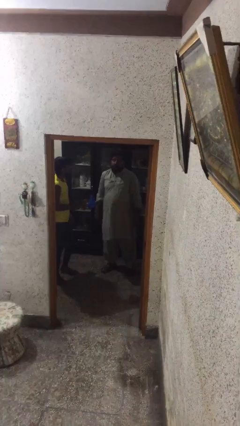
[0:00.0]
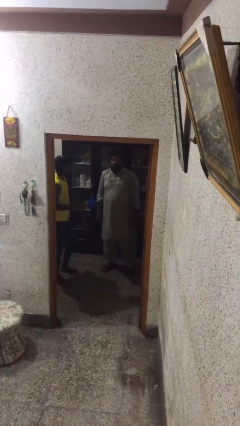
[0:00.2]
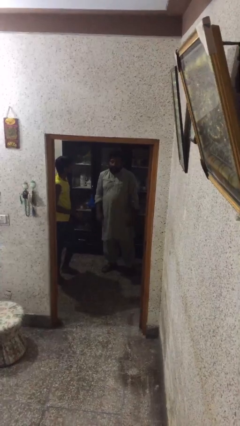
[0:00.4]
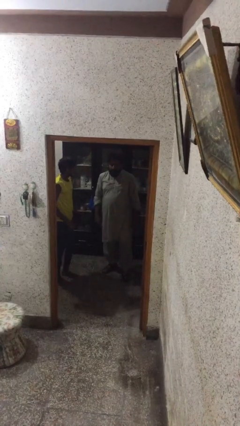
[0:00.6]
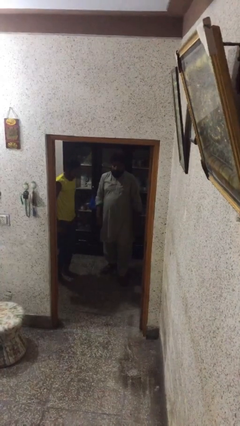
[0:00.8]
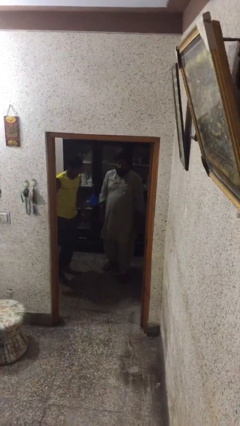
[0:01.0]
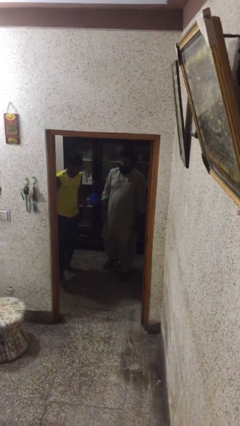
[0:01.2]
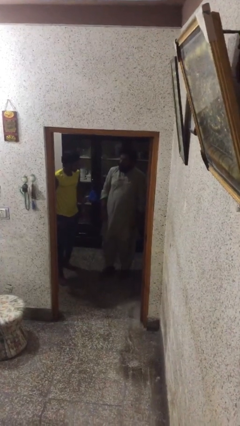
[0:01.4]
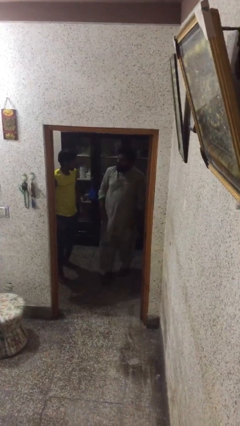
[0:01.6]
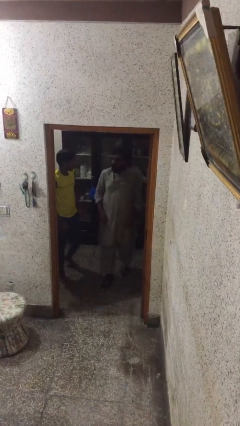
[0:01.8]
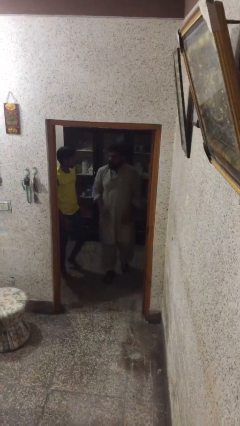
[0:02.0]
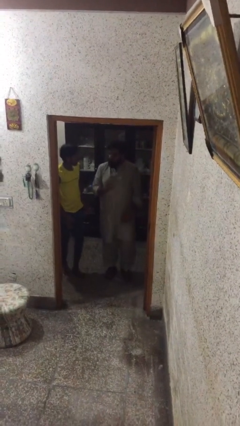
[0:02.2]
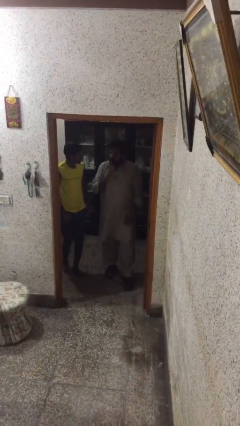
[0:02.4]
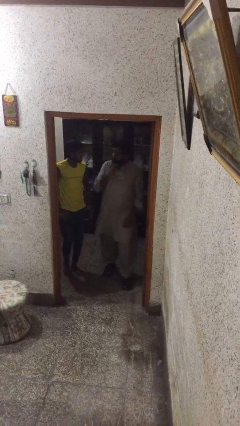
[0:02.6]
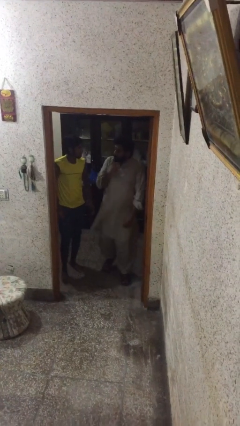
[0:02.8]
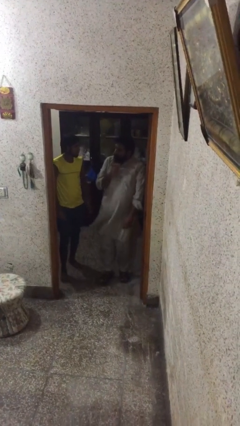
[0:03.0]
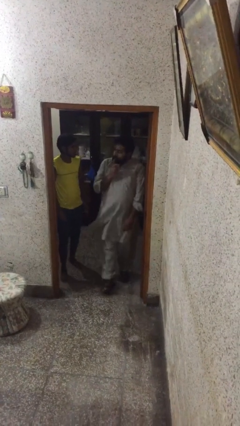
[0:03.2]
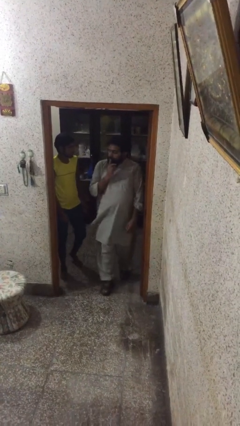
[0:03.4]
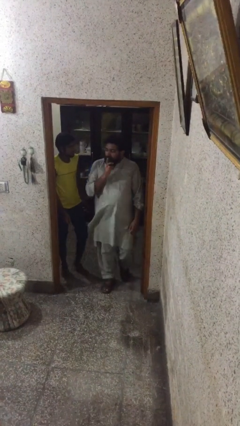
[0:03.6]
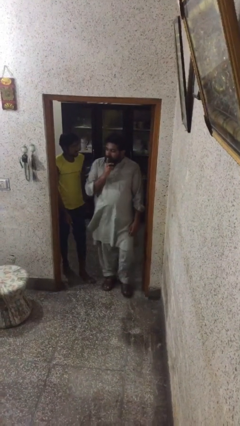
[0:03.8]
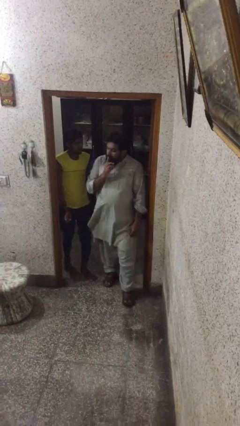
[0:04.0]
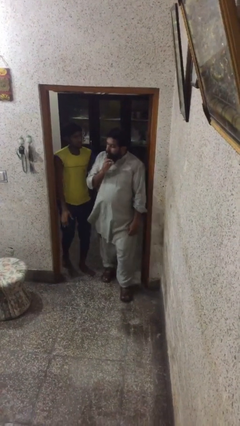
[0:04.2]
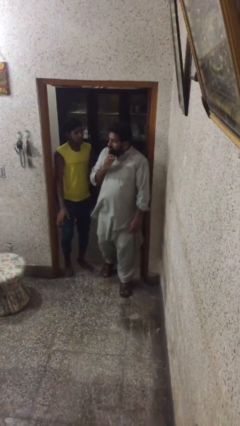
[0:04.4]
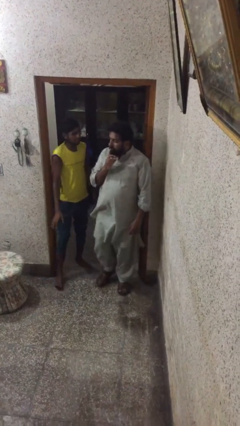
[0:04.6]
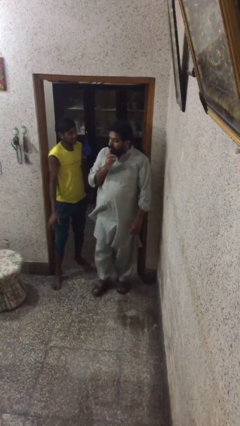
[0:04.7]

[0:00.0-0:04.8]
person talks to person

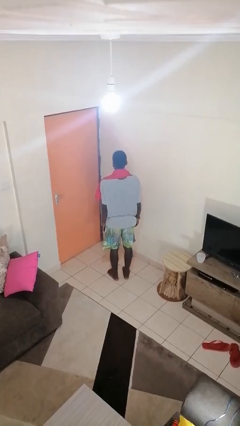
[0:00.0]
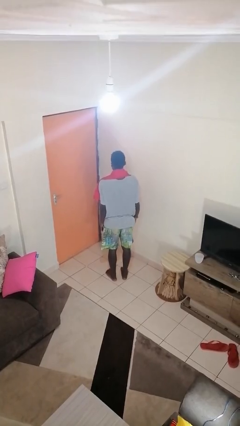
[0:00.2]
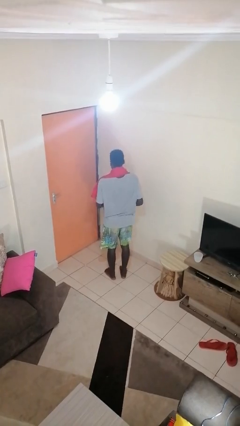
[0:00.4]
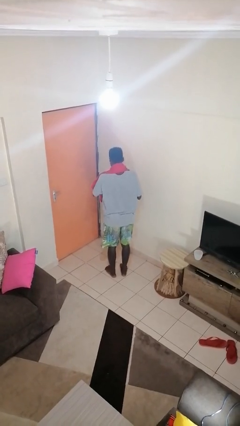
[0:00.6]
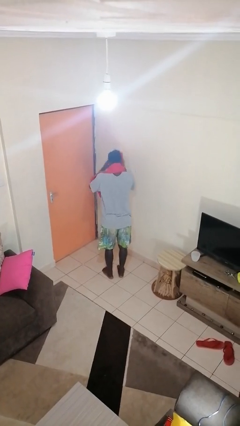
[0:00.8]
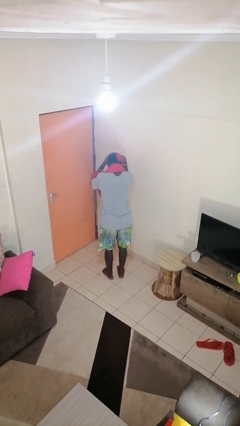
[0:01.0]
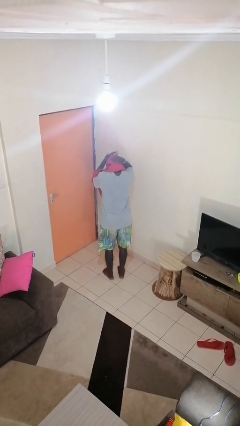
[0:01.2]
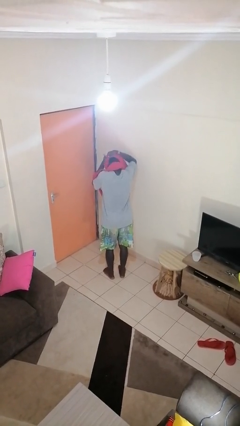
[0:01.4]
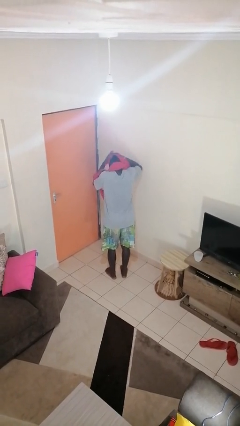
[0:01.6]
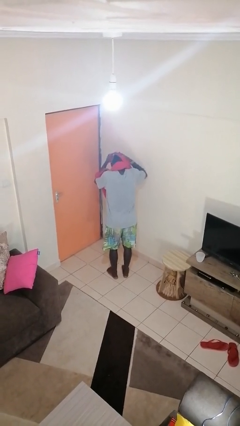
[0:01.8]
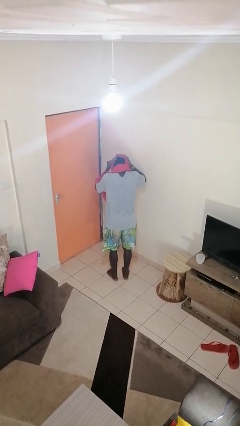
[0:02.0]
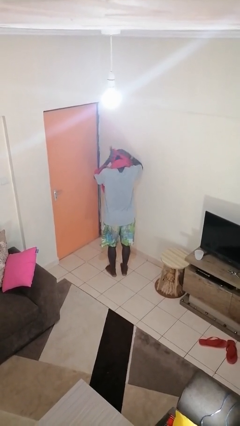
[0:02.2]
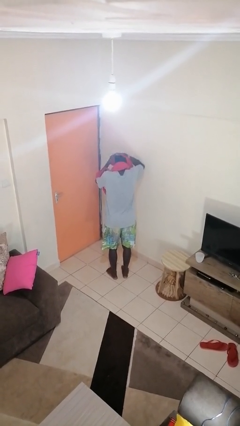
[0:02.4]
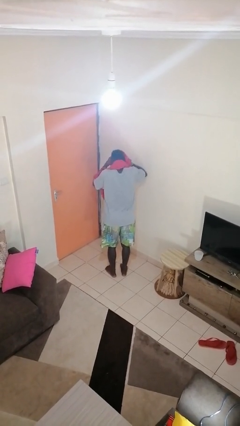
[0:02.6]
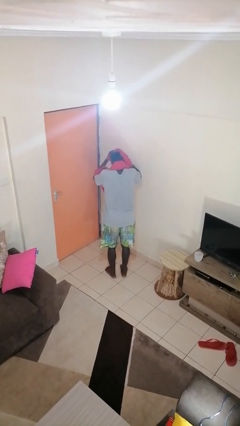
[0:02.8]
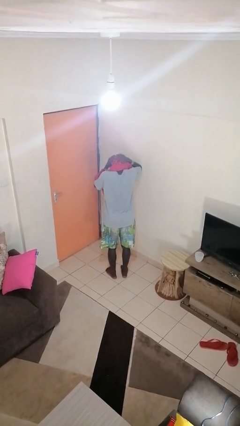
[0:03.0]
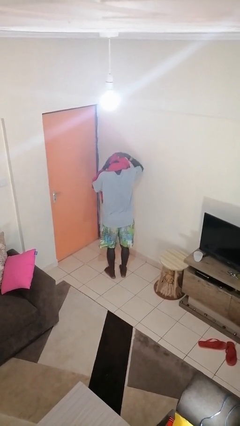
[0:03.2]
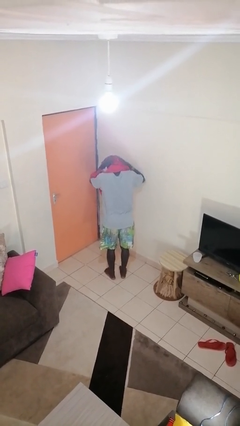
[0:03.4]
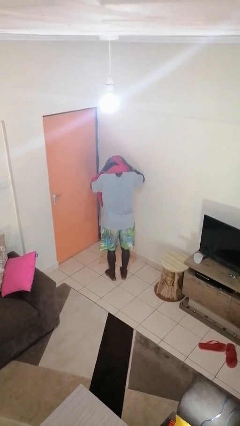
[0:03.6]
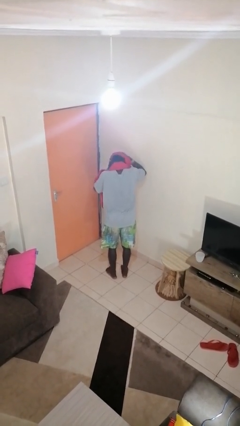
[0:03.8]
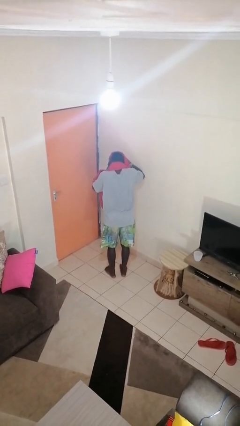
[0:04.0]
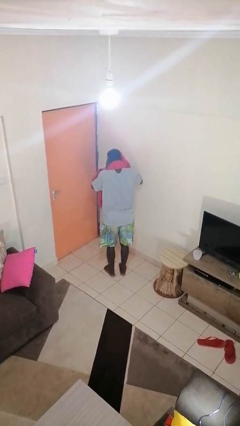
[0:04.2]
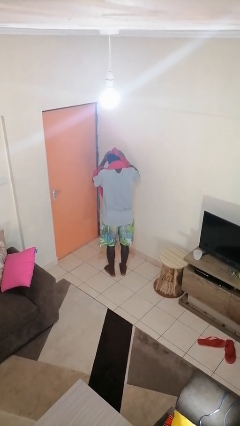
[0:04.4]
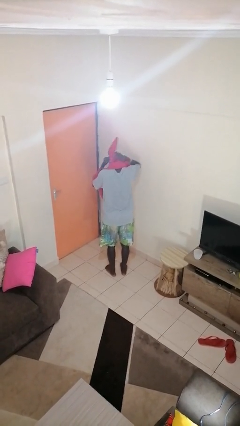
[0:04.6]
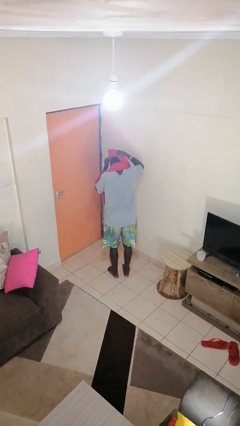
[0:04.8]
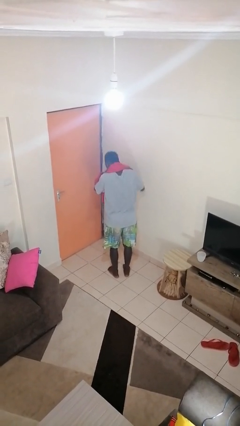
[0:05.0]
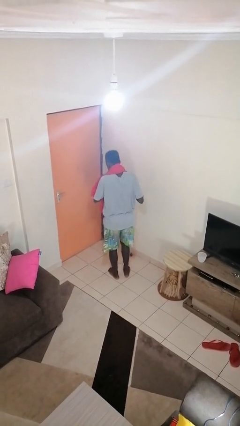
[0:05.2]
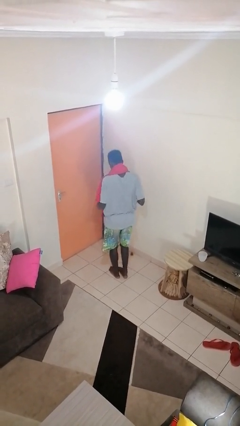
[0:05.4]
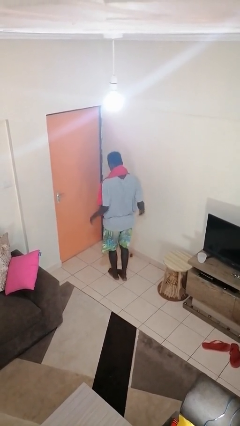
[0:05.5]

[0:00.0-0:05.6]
person dries hair with towel

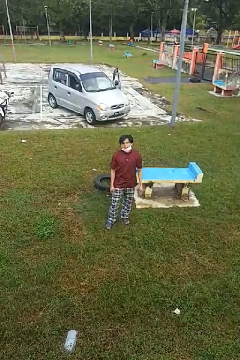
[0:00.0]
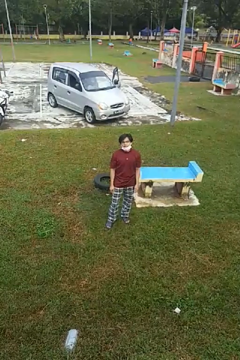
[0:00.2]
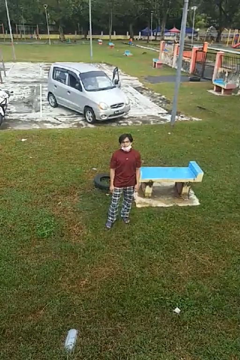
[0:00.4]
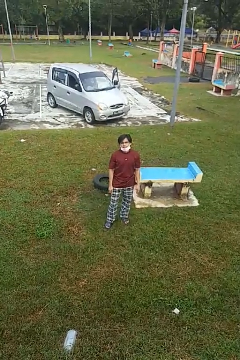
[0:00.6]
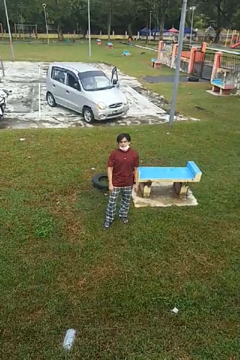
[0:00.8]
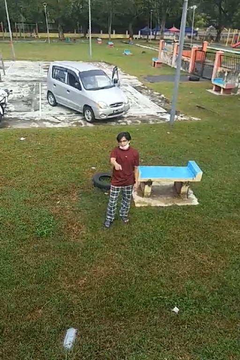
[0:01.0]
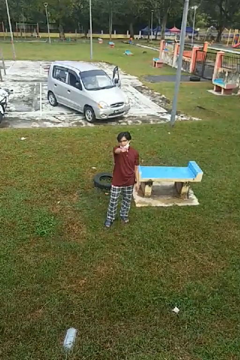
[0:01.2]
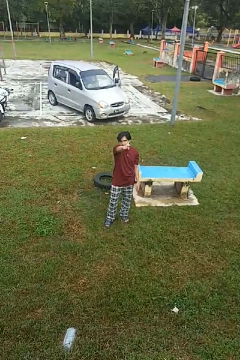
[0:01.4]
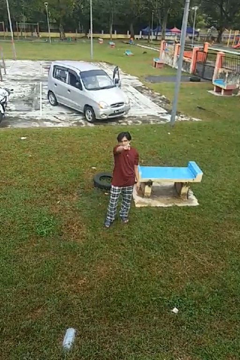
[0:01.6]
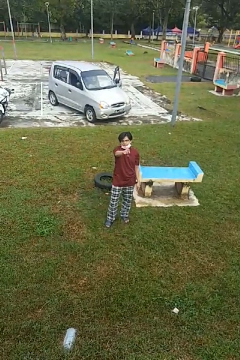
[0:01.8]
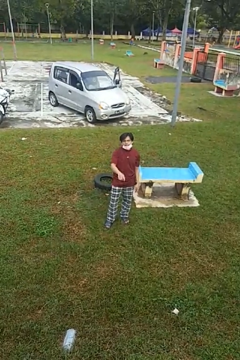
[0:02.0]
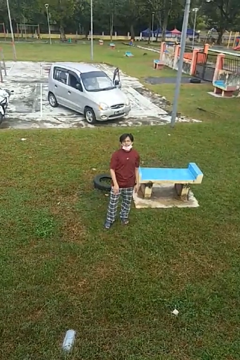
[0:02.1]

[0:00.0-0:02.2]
person points at person

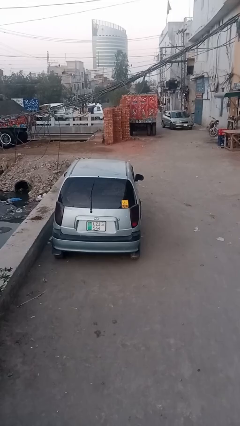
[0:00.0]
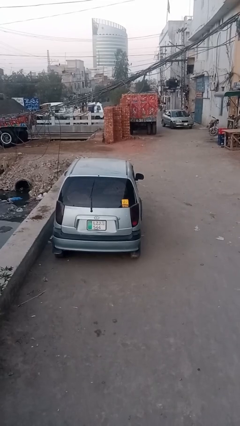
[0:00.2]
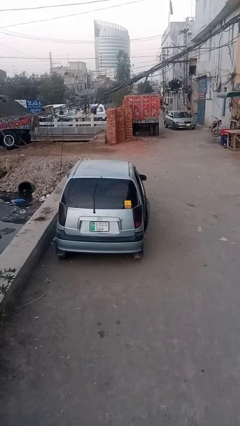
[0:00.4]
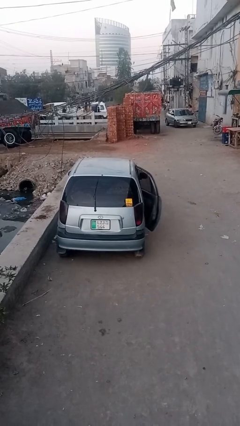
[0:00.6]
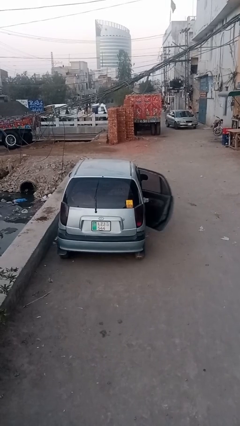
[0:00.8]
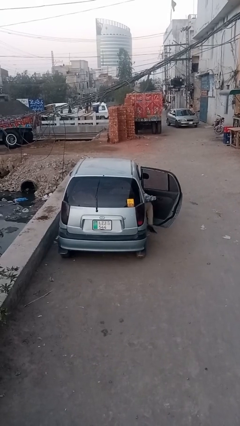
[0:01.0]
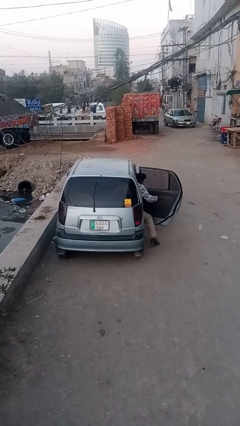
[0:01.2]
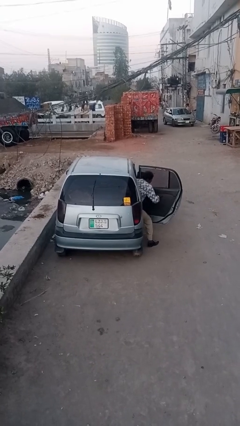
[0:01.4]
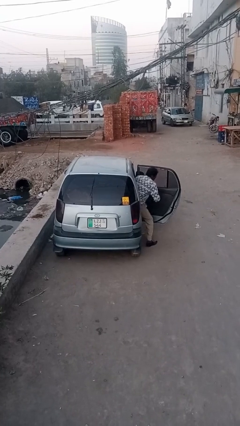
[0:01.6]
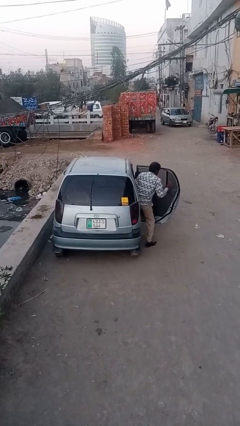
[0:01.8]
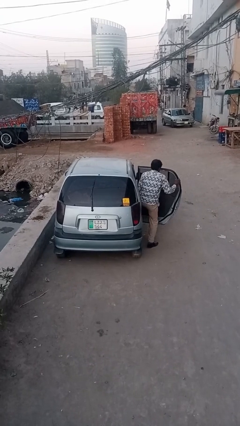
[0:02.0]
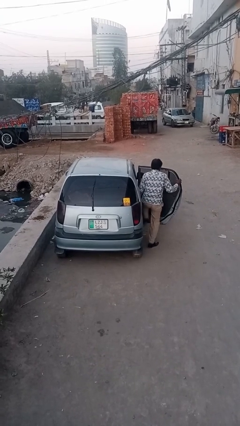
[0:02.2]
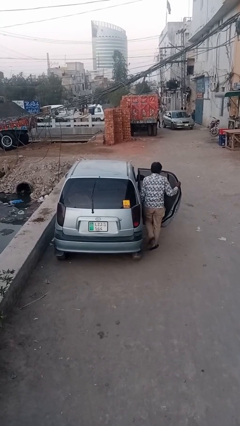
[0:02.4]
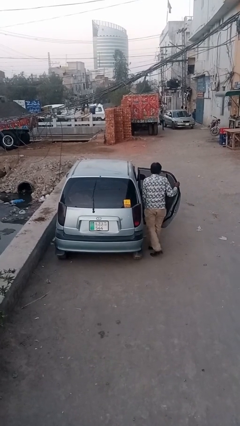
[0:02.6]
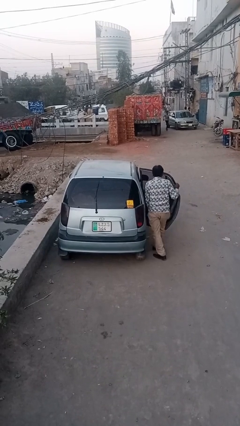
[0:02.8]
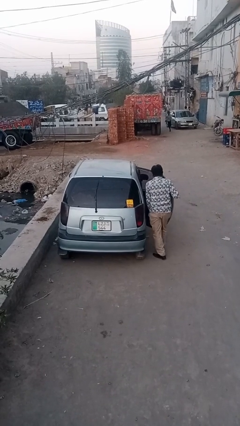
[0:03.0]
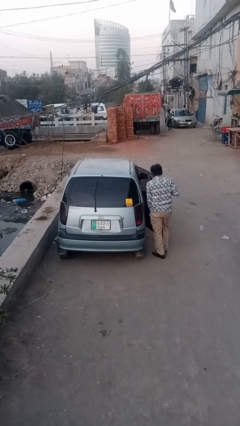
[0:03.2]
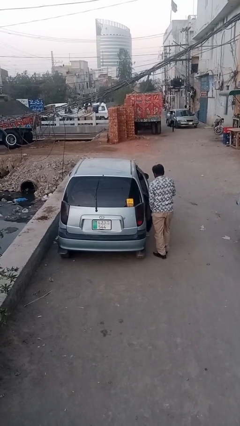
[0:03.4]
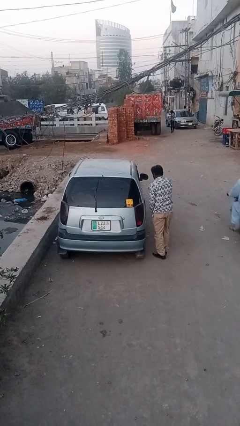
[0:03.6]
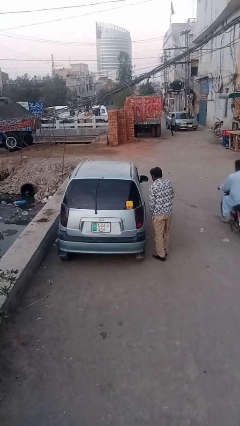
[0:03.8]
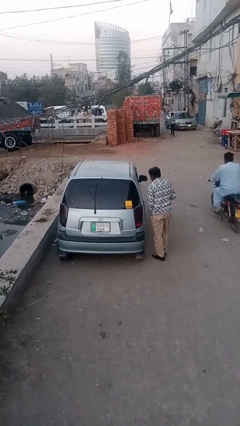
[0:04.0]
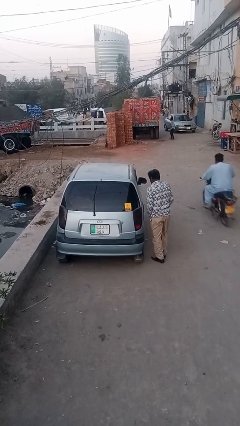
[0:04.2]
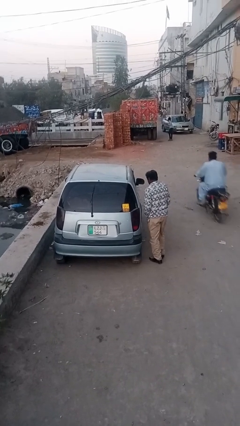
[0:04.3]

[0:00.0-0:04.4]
car drops off person

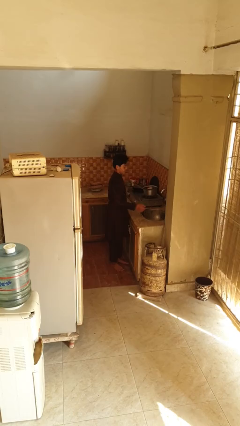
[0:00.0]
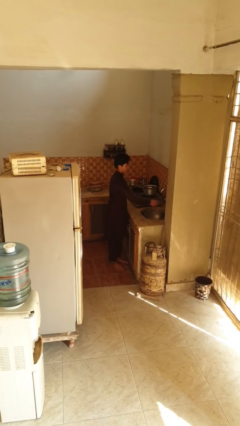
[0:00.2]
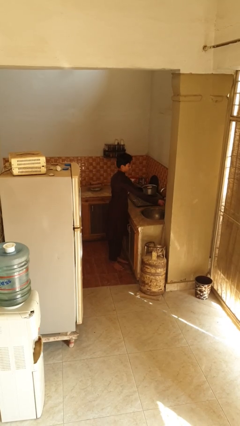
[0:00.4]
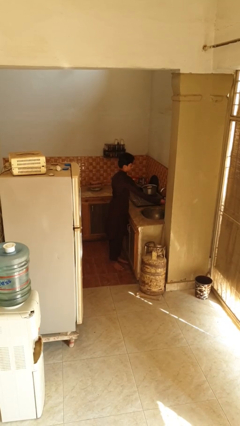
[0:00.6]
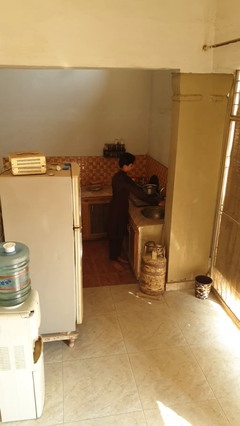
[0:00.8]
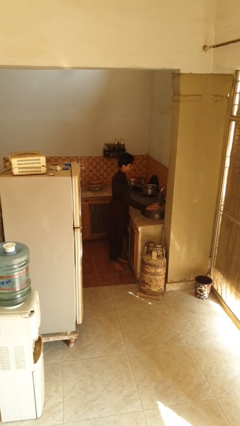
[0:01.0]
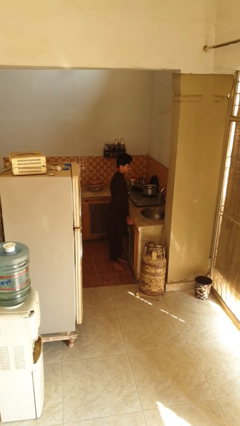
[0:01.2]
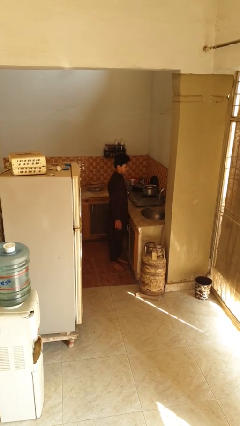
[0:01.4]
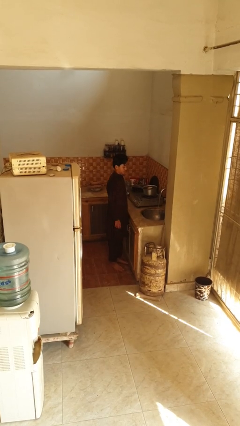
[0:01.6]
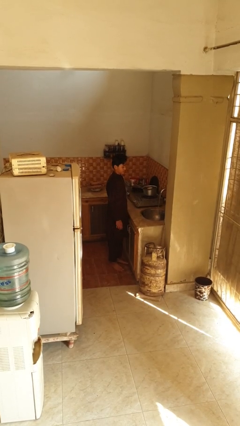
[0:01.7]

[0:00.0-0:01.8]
person turns on faucet
